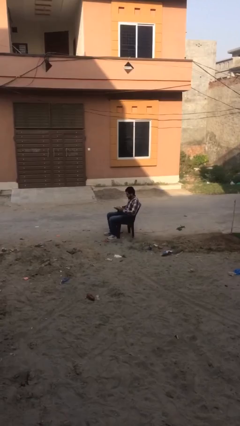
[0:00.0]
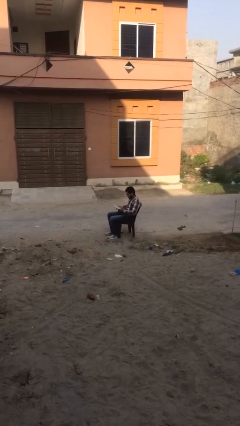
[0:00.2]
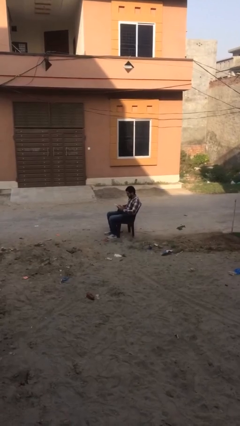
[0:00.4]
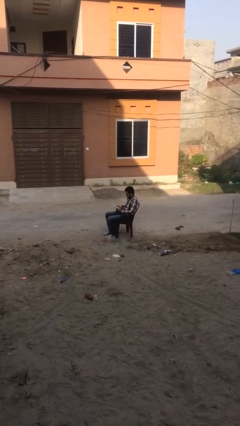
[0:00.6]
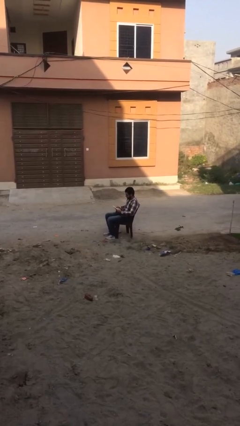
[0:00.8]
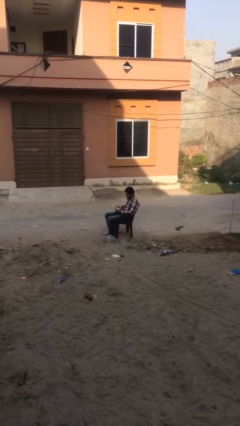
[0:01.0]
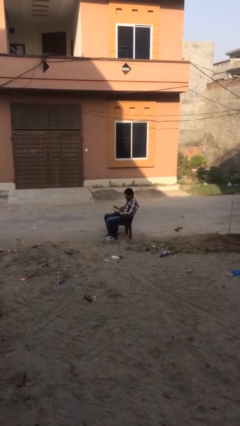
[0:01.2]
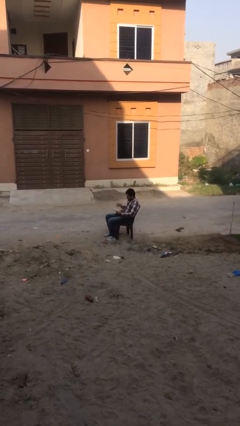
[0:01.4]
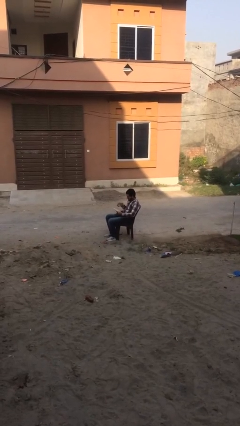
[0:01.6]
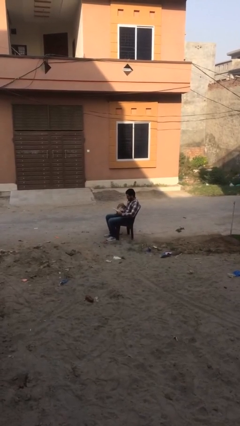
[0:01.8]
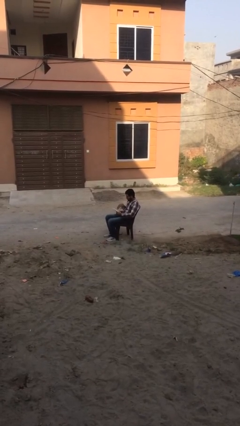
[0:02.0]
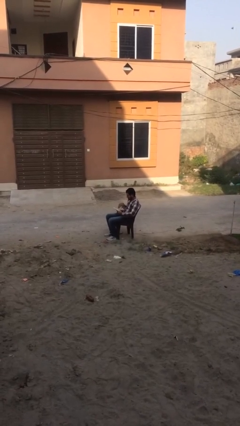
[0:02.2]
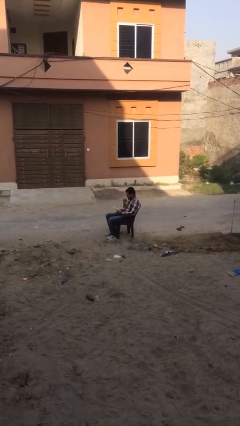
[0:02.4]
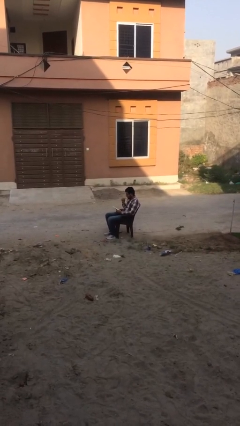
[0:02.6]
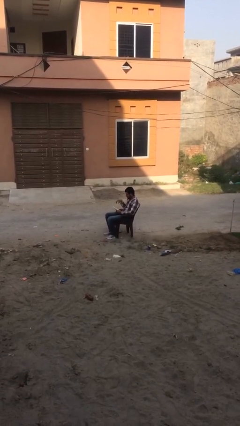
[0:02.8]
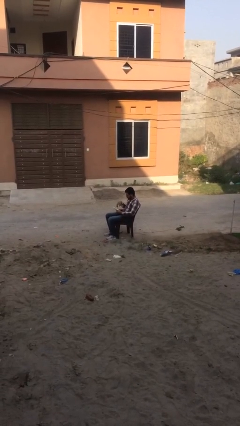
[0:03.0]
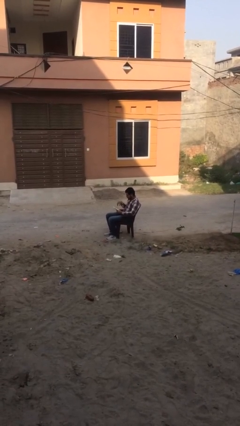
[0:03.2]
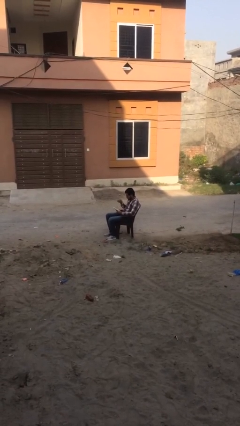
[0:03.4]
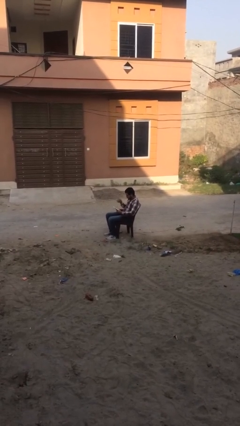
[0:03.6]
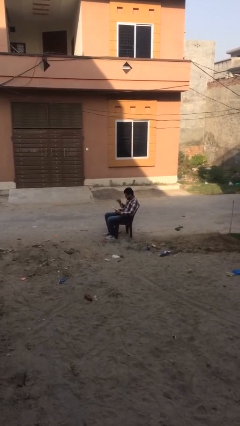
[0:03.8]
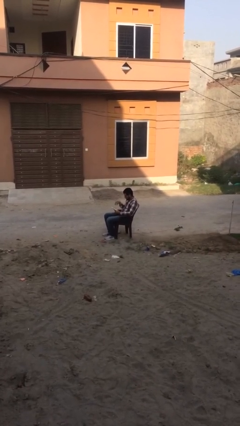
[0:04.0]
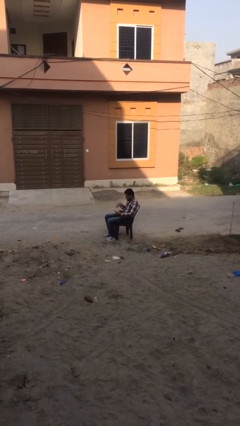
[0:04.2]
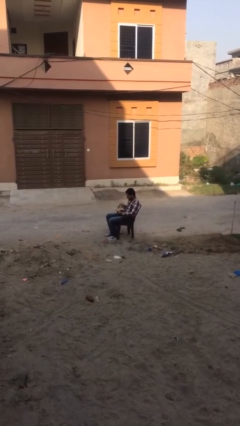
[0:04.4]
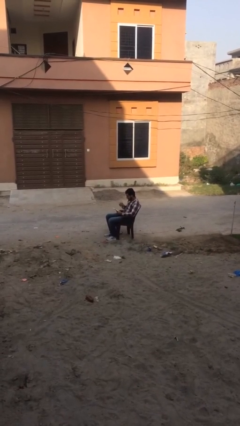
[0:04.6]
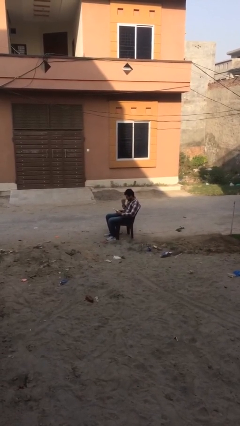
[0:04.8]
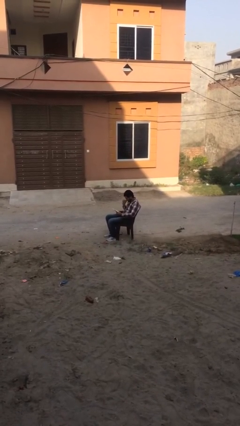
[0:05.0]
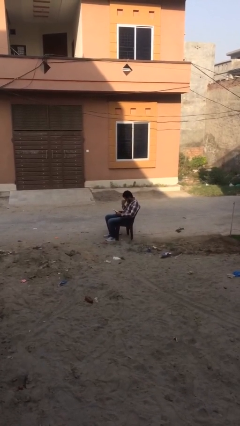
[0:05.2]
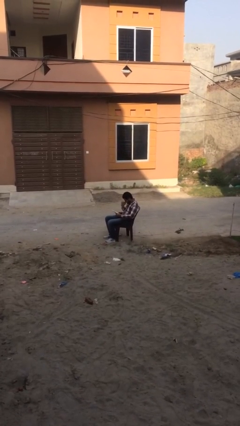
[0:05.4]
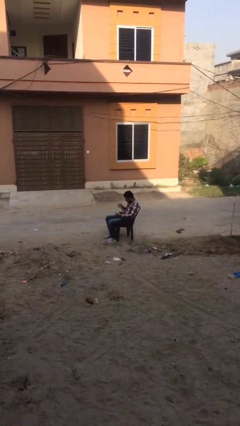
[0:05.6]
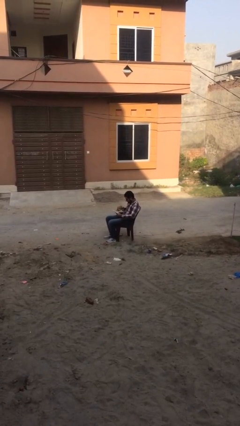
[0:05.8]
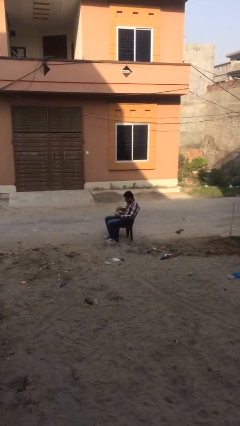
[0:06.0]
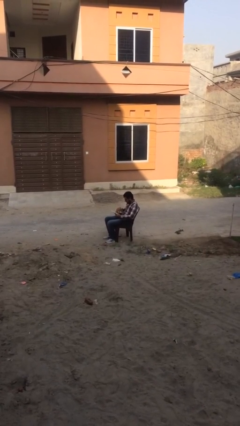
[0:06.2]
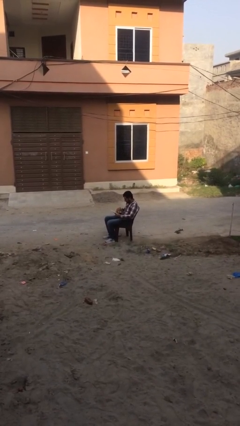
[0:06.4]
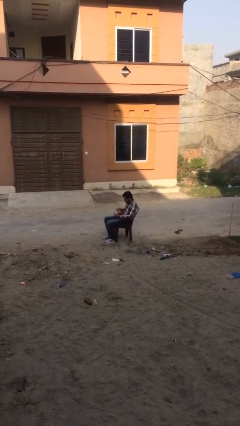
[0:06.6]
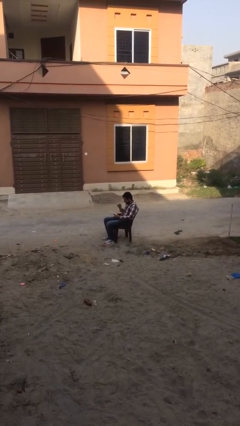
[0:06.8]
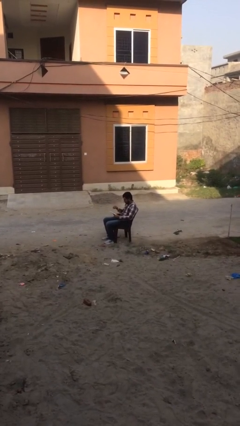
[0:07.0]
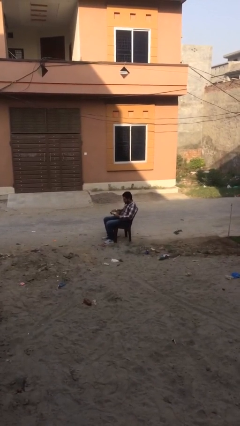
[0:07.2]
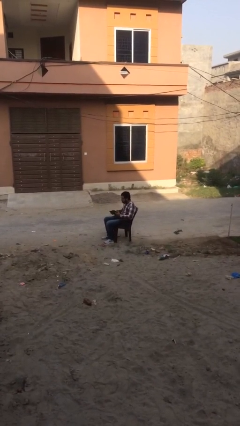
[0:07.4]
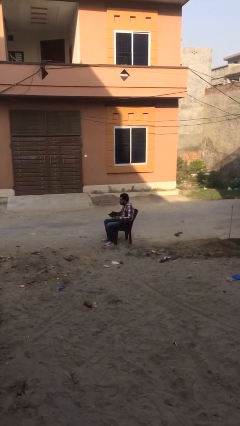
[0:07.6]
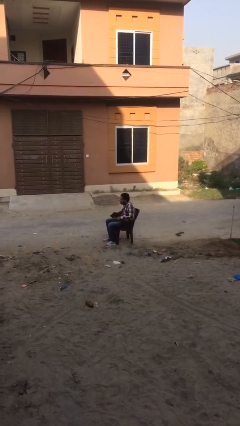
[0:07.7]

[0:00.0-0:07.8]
person reads document

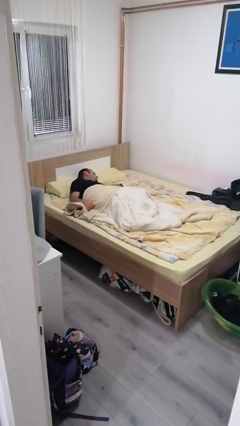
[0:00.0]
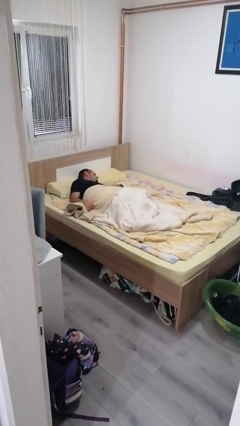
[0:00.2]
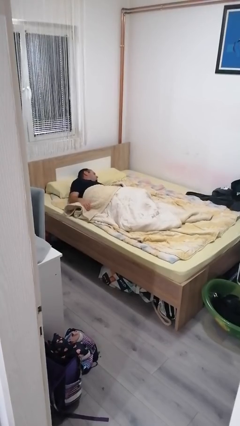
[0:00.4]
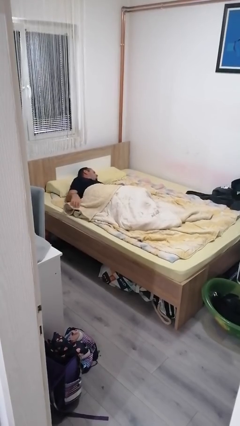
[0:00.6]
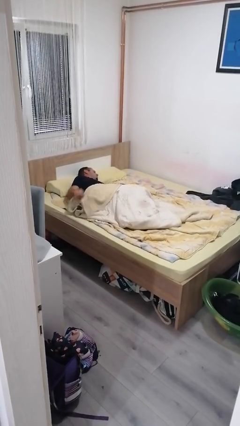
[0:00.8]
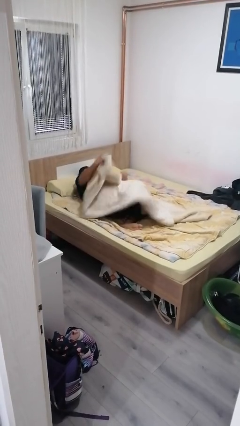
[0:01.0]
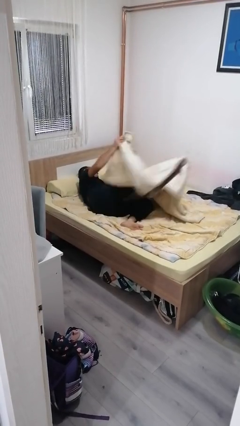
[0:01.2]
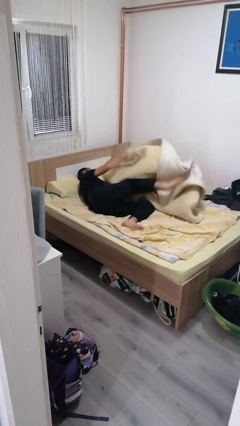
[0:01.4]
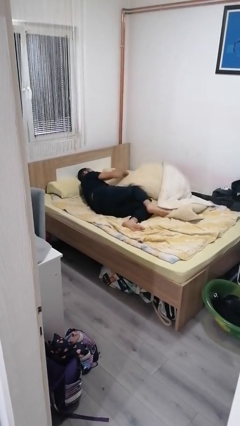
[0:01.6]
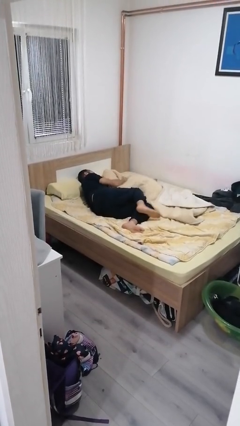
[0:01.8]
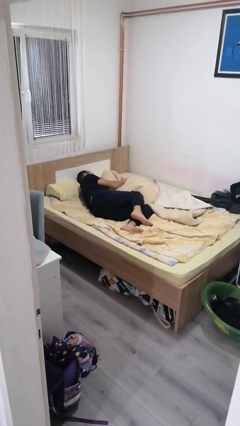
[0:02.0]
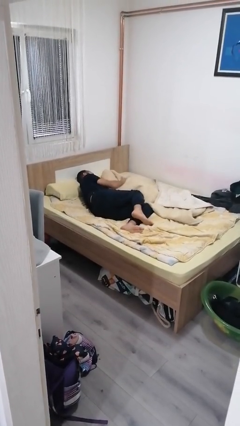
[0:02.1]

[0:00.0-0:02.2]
person uncovers with bedsheets

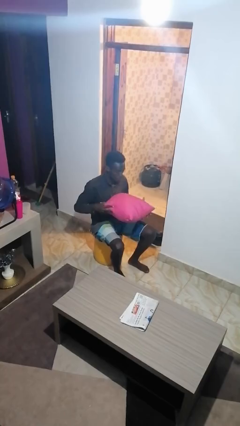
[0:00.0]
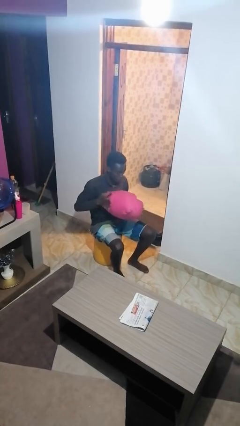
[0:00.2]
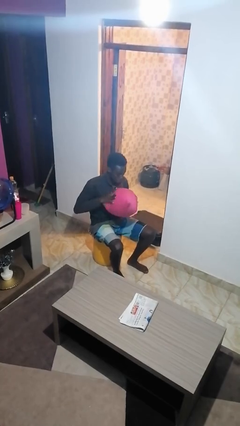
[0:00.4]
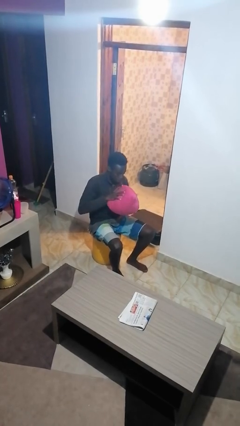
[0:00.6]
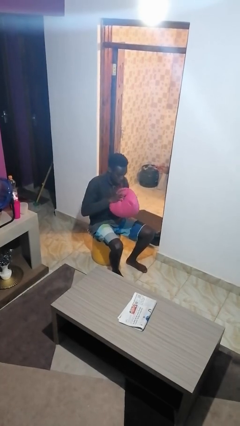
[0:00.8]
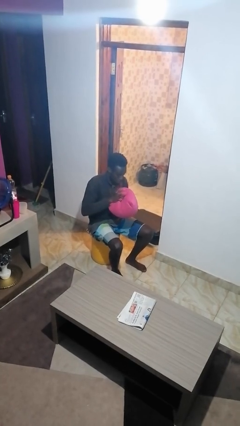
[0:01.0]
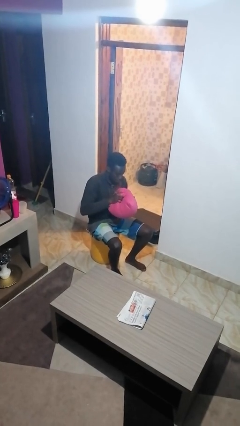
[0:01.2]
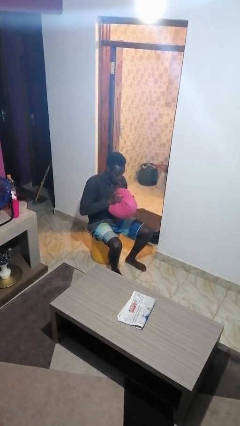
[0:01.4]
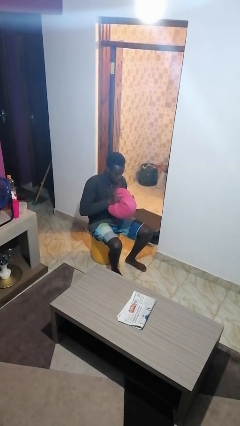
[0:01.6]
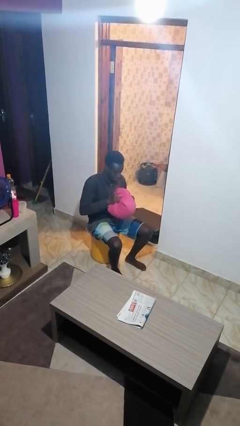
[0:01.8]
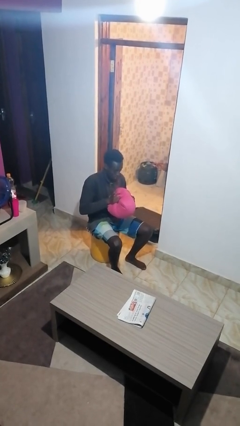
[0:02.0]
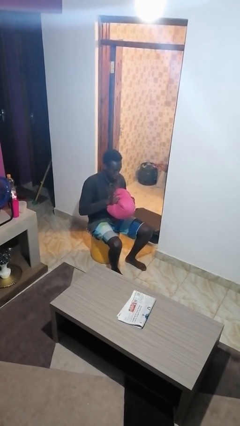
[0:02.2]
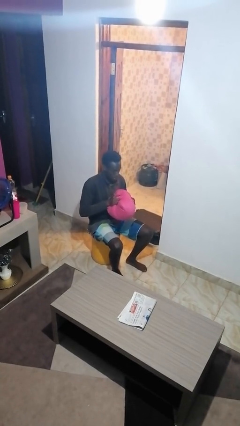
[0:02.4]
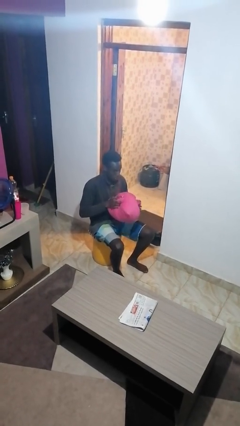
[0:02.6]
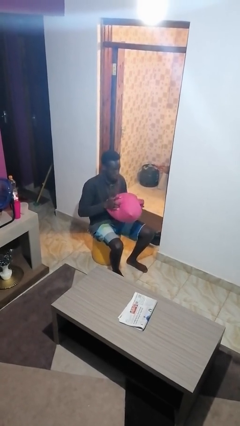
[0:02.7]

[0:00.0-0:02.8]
person squeezes object

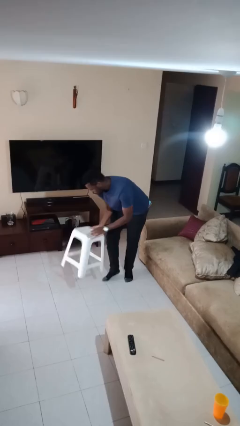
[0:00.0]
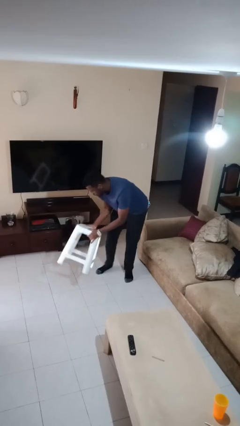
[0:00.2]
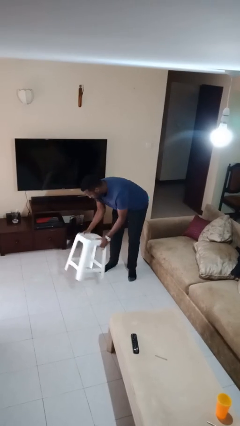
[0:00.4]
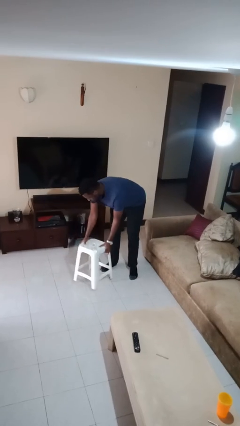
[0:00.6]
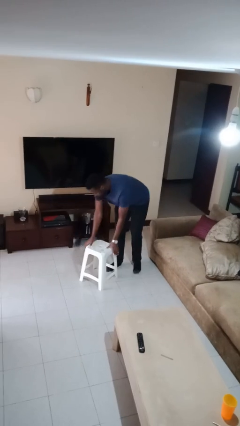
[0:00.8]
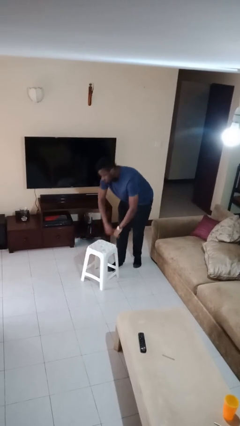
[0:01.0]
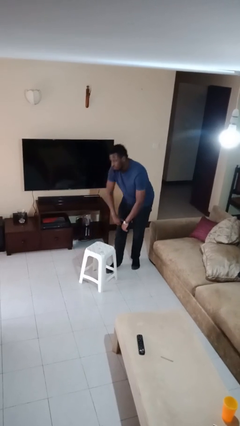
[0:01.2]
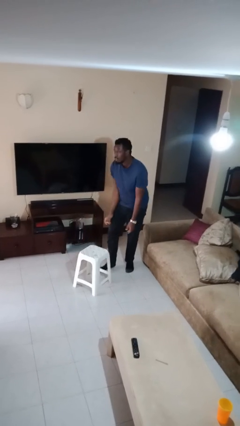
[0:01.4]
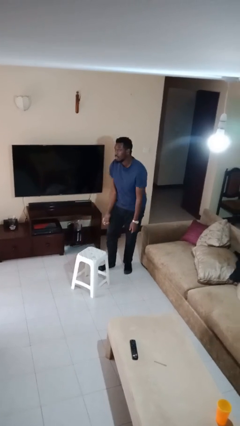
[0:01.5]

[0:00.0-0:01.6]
person sets upright furniture

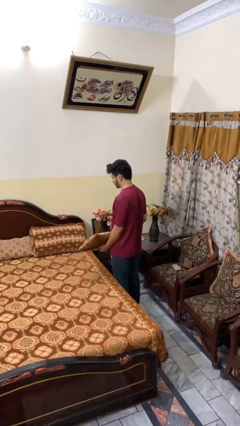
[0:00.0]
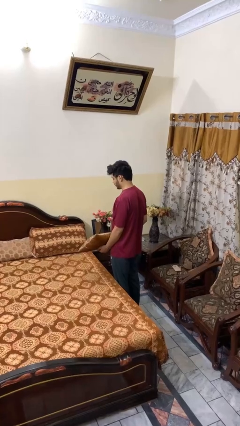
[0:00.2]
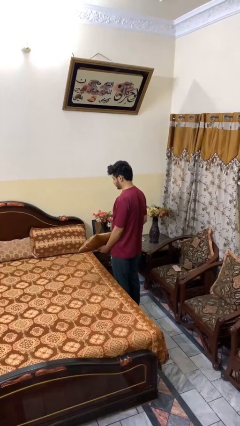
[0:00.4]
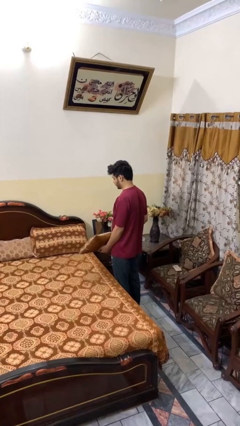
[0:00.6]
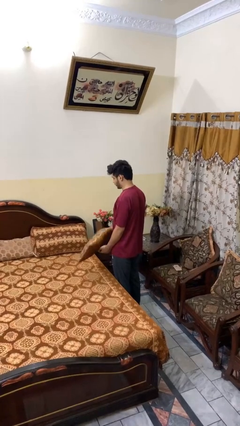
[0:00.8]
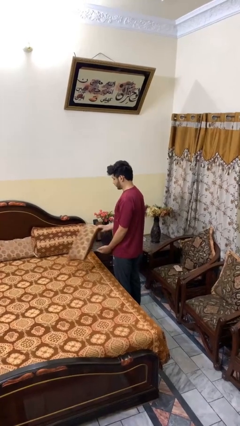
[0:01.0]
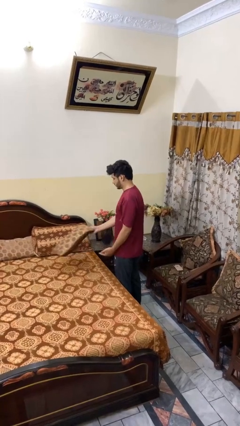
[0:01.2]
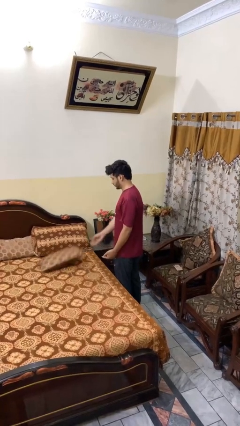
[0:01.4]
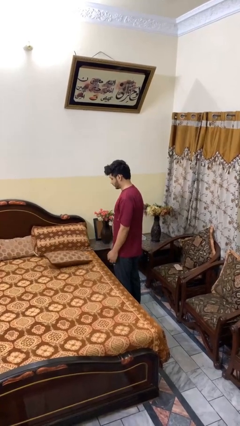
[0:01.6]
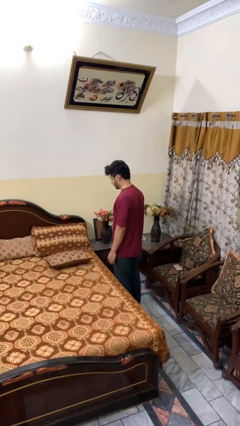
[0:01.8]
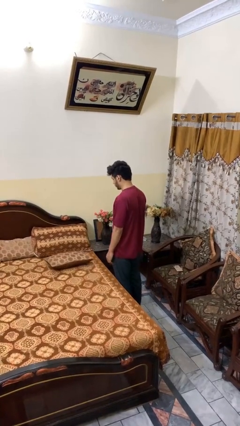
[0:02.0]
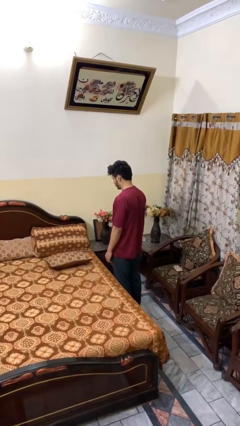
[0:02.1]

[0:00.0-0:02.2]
person puts down object on bed

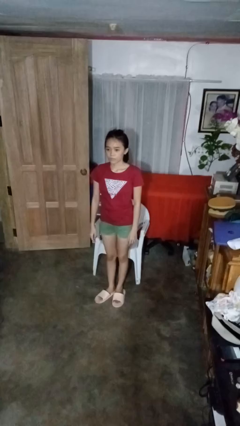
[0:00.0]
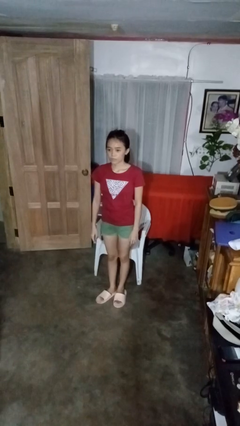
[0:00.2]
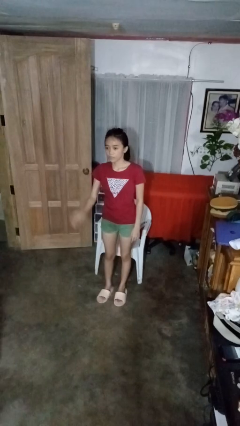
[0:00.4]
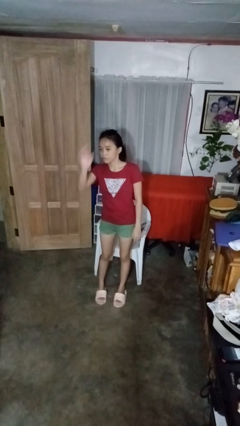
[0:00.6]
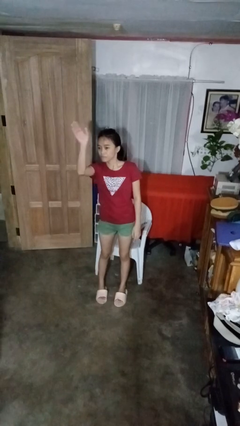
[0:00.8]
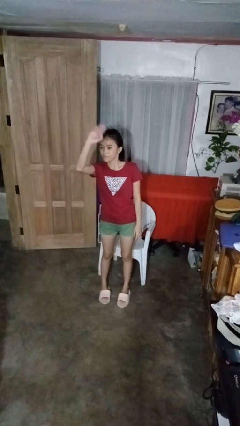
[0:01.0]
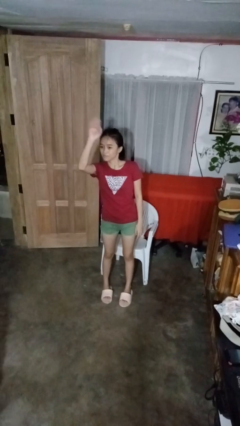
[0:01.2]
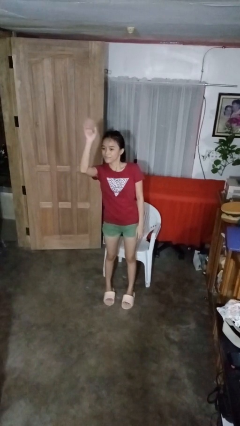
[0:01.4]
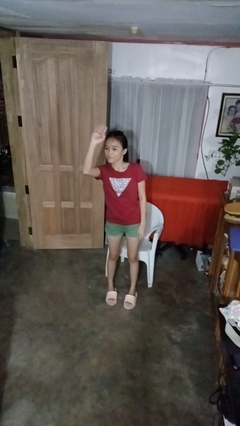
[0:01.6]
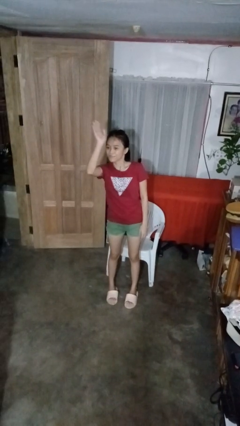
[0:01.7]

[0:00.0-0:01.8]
person waves at person
